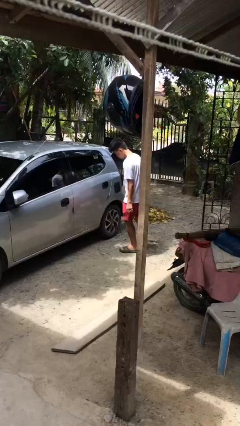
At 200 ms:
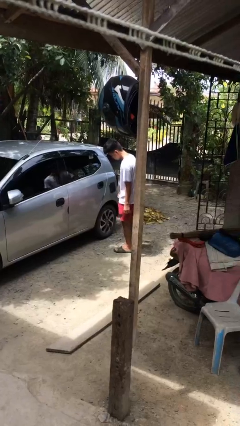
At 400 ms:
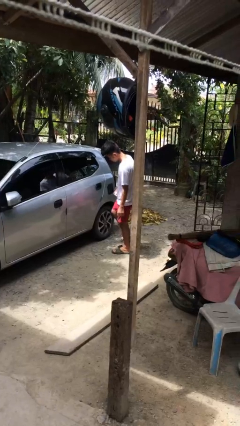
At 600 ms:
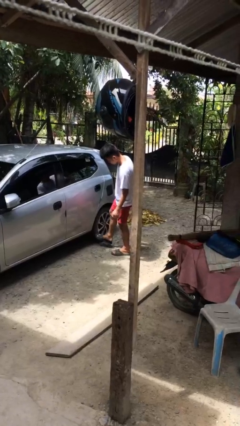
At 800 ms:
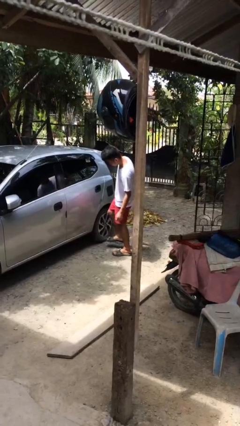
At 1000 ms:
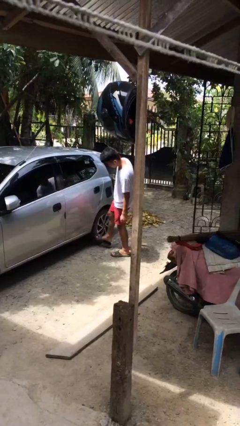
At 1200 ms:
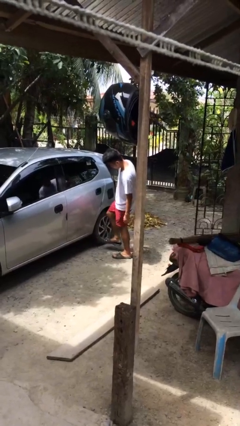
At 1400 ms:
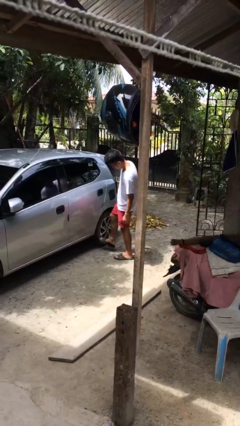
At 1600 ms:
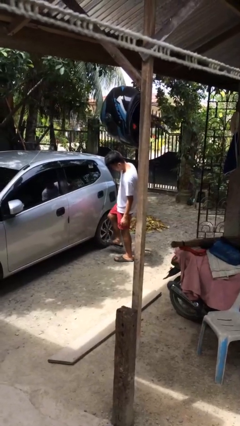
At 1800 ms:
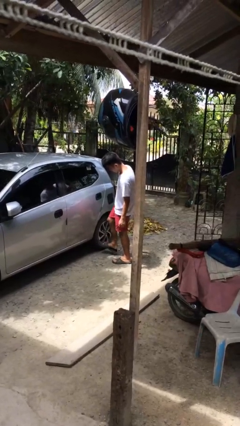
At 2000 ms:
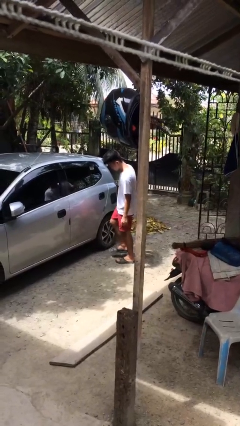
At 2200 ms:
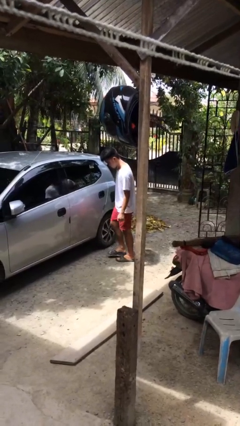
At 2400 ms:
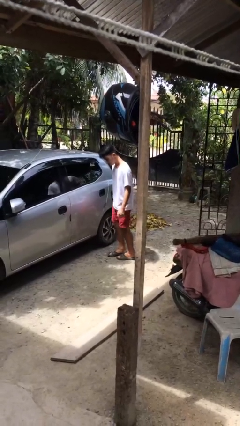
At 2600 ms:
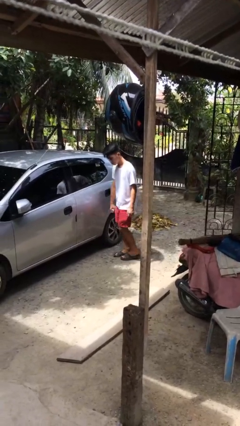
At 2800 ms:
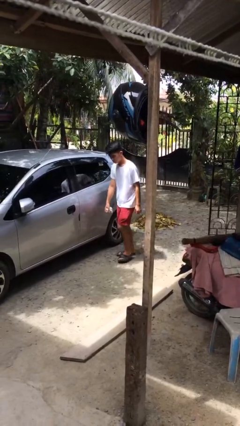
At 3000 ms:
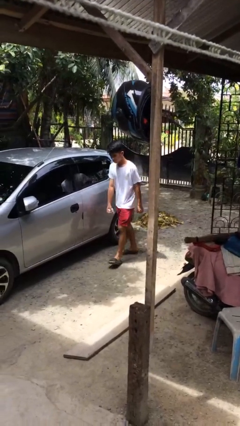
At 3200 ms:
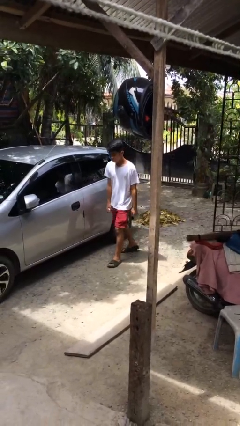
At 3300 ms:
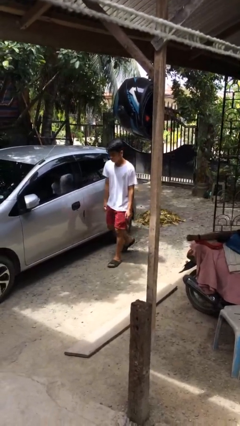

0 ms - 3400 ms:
person kicks car tires

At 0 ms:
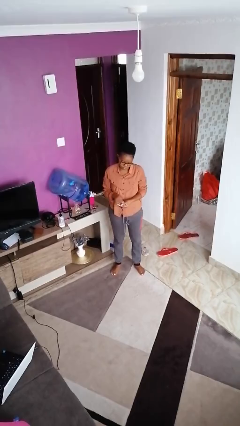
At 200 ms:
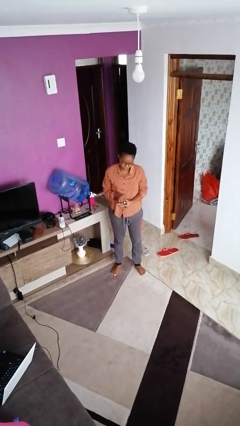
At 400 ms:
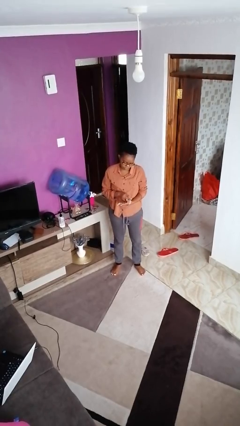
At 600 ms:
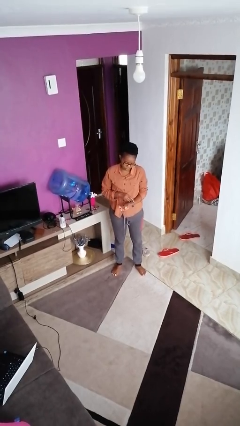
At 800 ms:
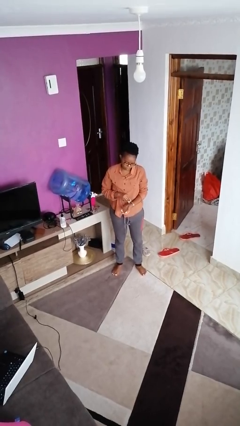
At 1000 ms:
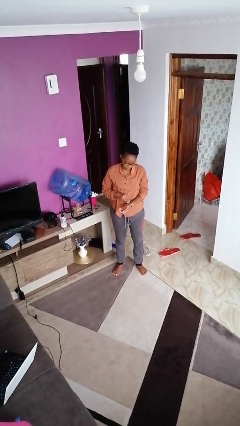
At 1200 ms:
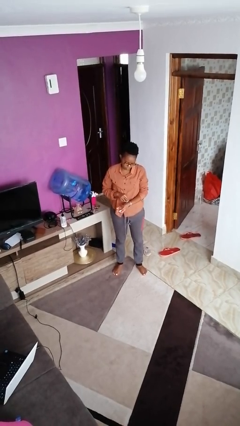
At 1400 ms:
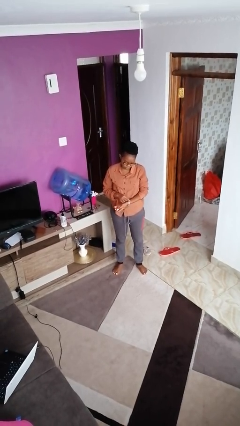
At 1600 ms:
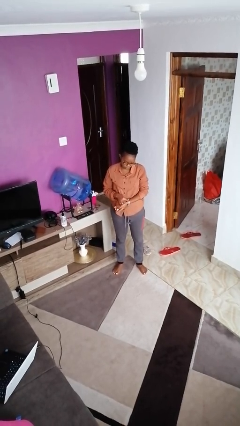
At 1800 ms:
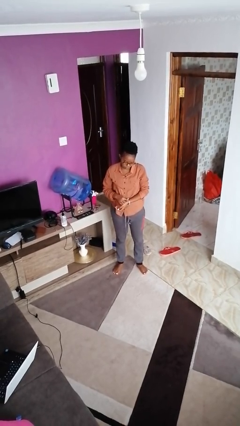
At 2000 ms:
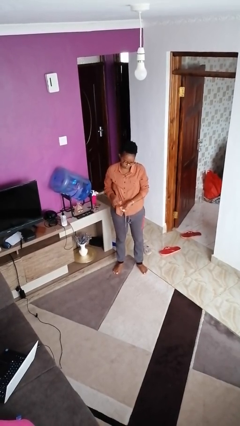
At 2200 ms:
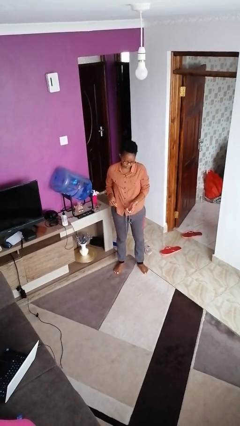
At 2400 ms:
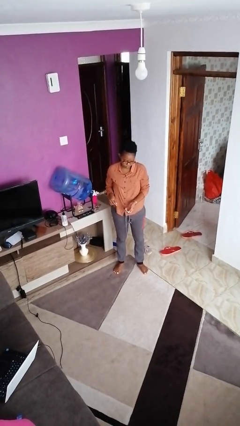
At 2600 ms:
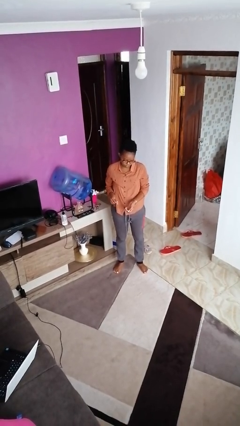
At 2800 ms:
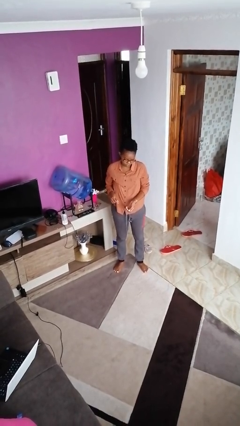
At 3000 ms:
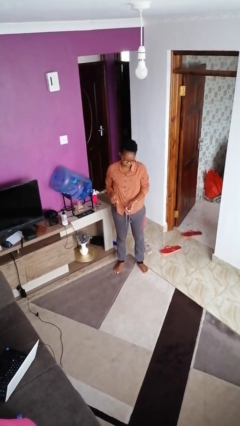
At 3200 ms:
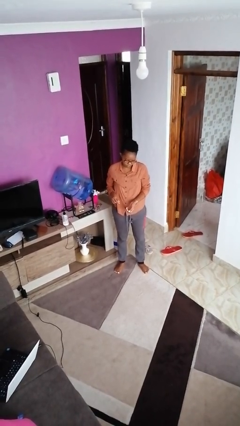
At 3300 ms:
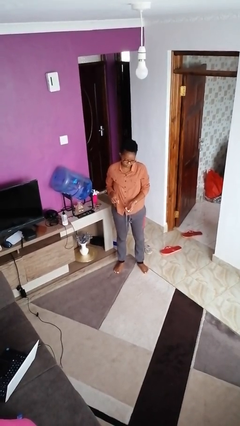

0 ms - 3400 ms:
person puts on wristwatch

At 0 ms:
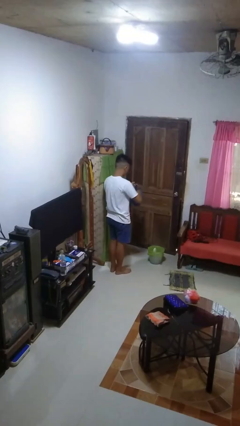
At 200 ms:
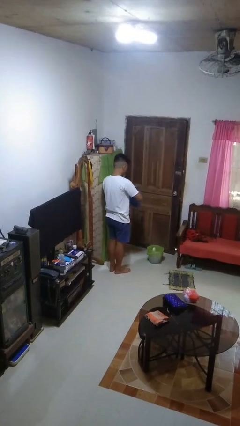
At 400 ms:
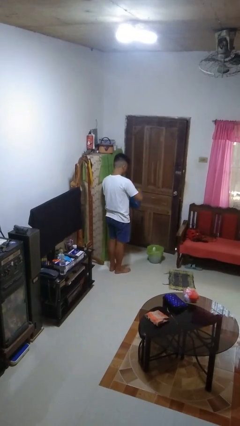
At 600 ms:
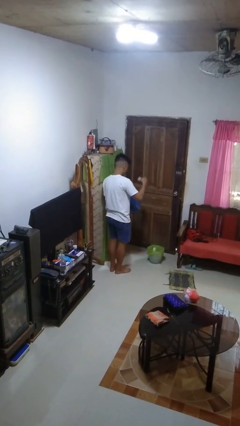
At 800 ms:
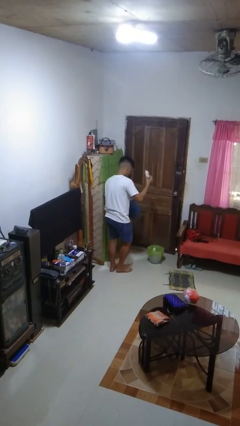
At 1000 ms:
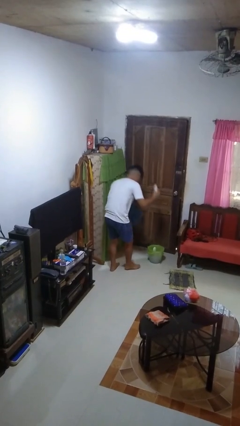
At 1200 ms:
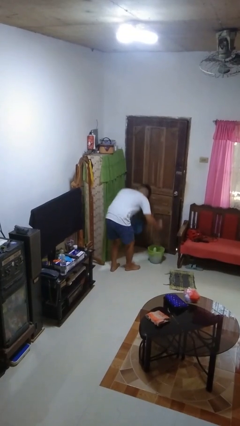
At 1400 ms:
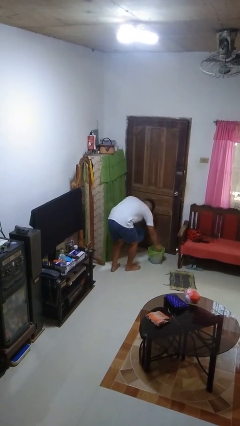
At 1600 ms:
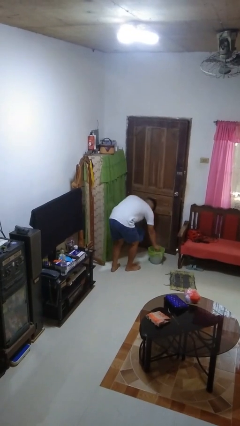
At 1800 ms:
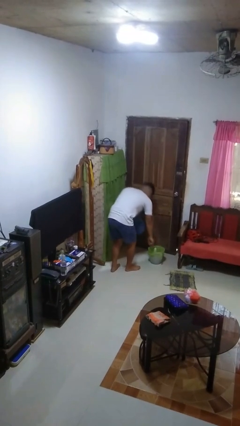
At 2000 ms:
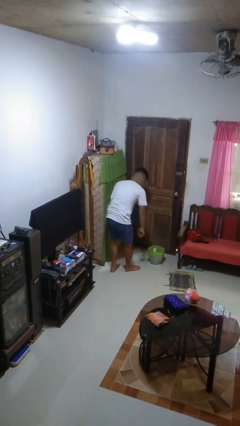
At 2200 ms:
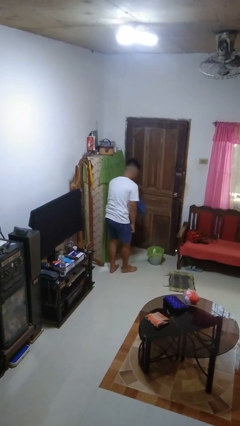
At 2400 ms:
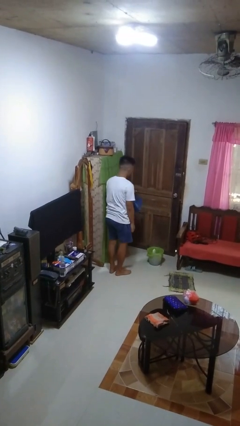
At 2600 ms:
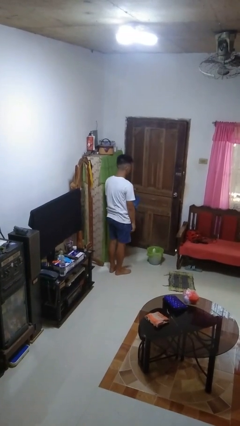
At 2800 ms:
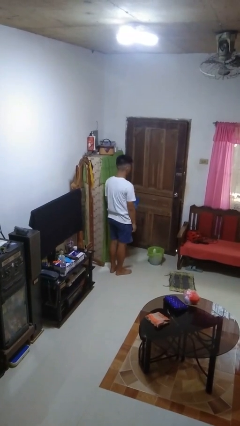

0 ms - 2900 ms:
person discards trash

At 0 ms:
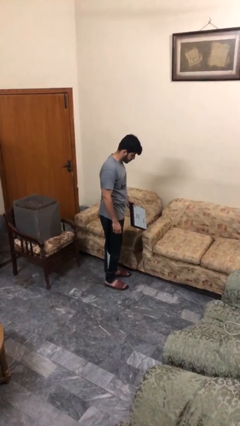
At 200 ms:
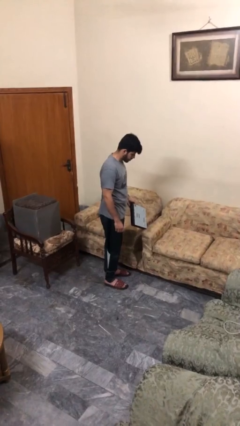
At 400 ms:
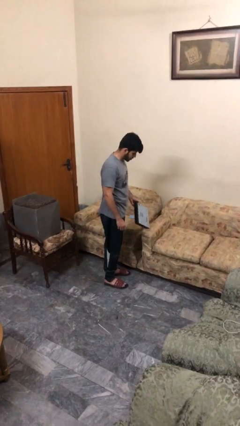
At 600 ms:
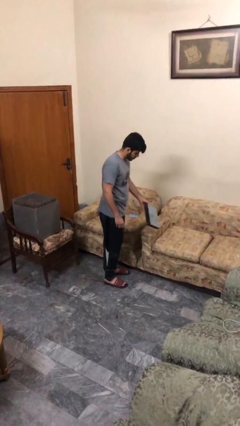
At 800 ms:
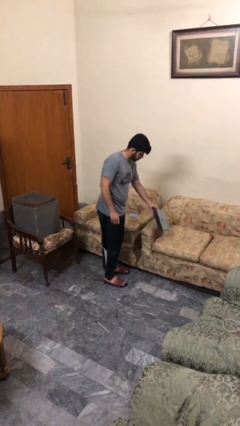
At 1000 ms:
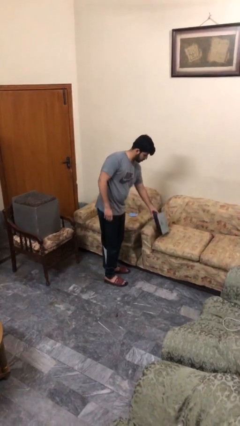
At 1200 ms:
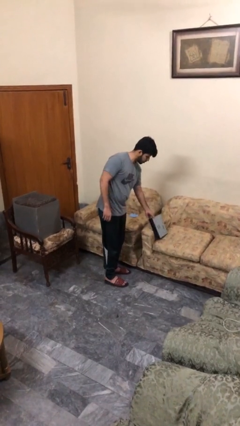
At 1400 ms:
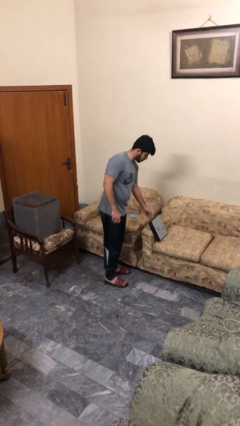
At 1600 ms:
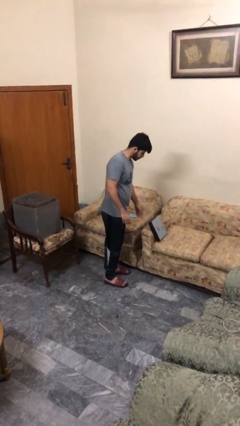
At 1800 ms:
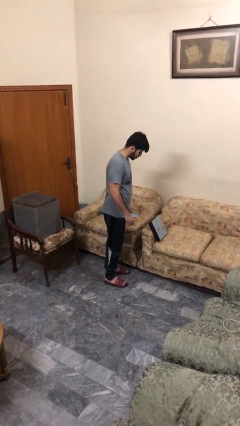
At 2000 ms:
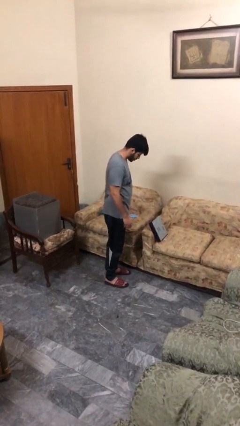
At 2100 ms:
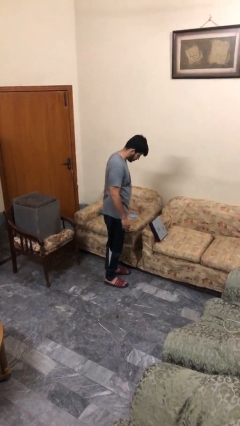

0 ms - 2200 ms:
person puts down object on couch

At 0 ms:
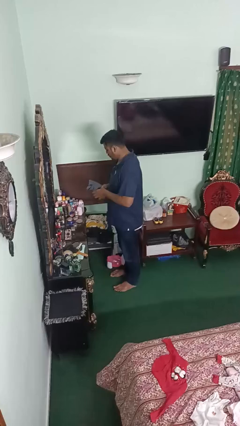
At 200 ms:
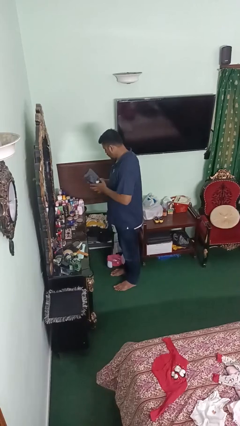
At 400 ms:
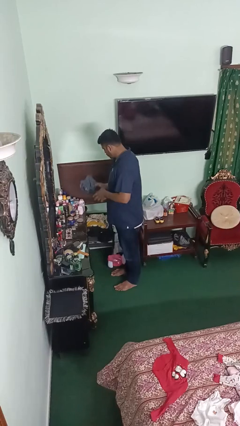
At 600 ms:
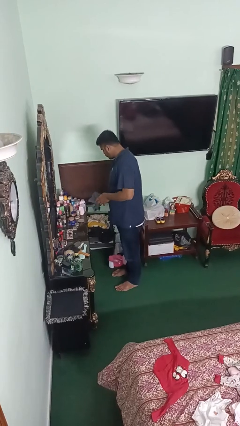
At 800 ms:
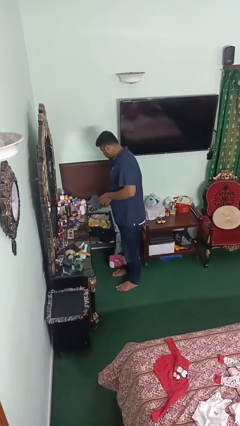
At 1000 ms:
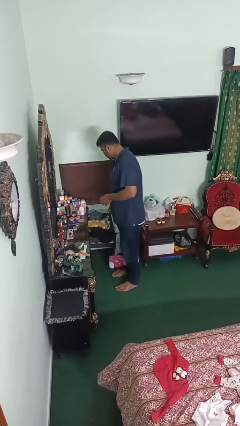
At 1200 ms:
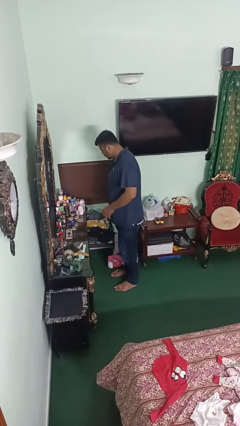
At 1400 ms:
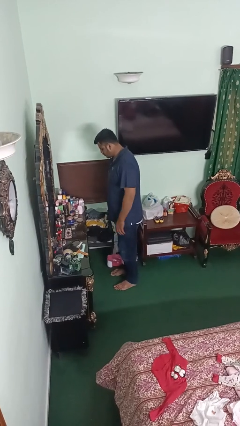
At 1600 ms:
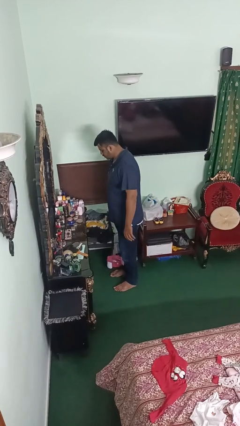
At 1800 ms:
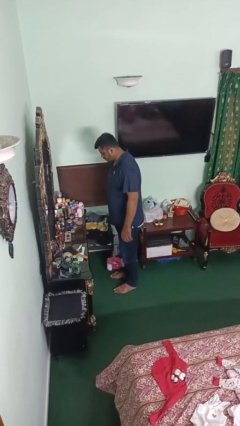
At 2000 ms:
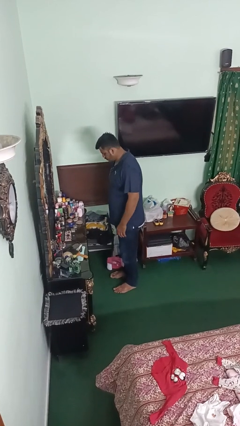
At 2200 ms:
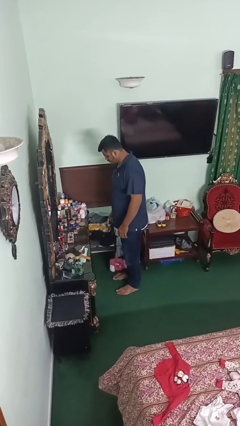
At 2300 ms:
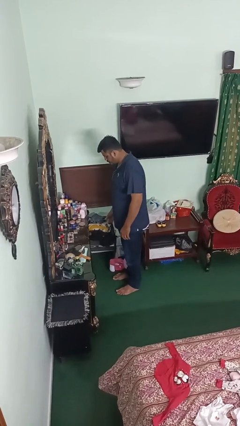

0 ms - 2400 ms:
person puts clothes into dresser

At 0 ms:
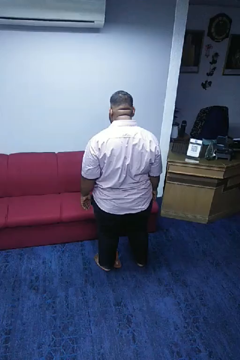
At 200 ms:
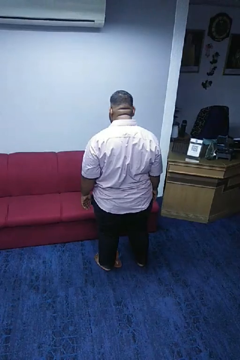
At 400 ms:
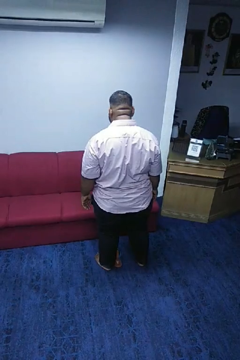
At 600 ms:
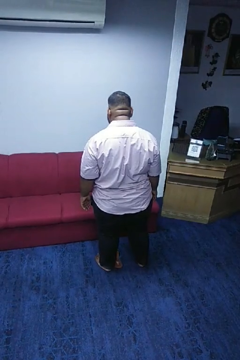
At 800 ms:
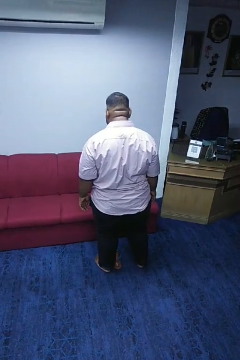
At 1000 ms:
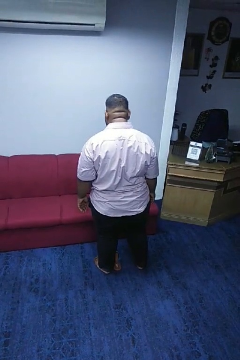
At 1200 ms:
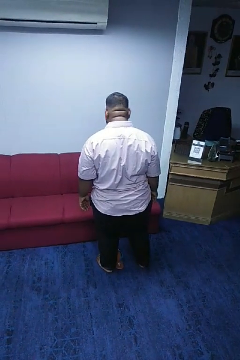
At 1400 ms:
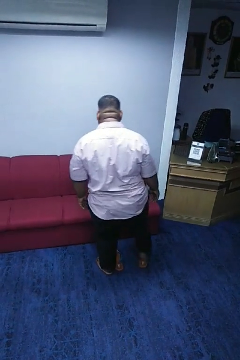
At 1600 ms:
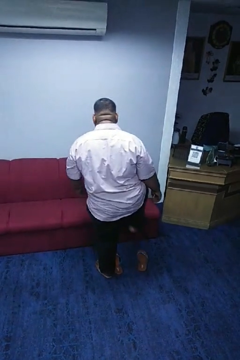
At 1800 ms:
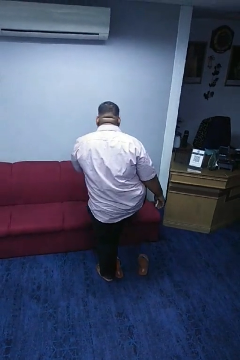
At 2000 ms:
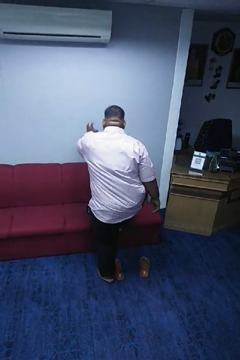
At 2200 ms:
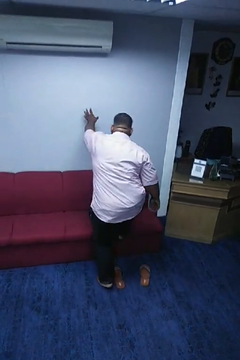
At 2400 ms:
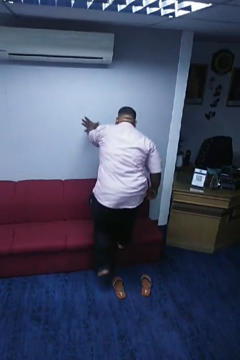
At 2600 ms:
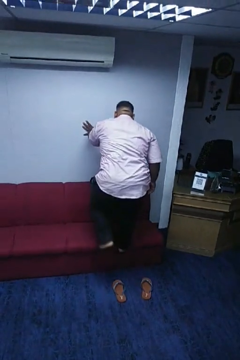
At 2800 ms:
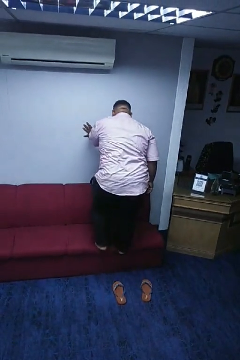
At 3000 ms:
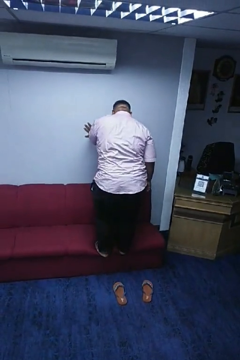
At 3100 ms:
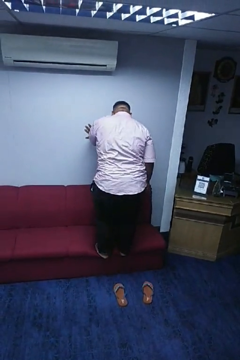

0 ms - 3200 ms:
person climbs on couch

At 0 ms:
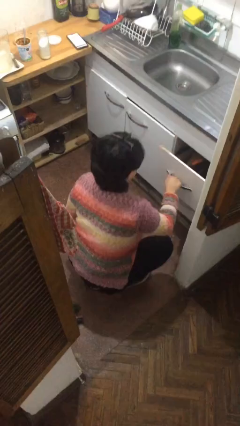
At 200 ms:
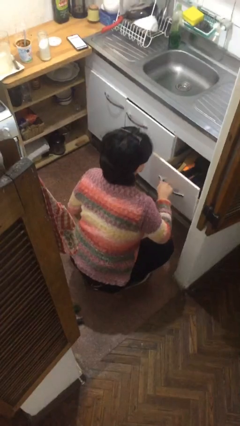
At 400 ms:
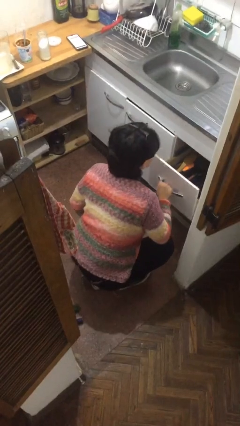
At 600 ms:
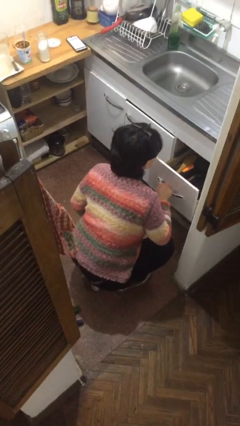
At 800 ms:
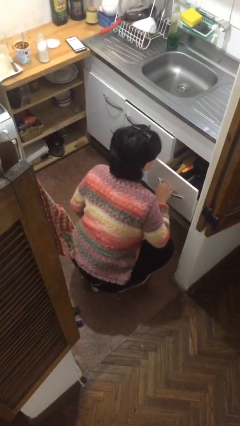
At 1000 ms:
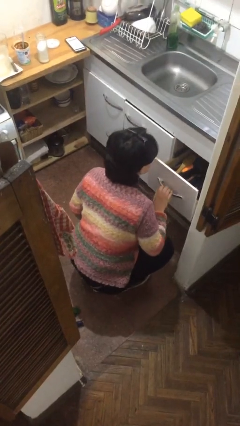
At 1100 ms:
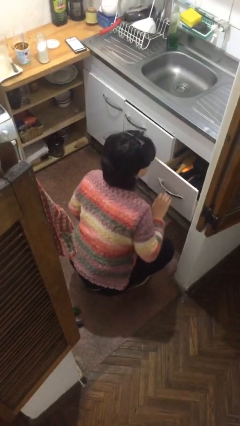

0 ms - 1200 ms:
person opens kitchen drawer
